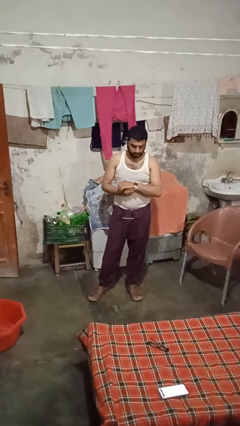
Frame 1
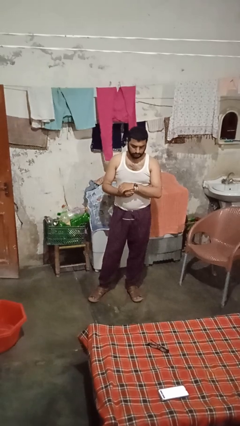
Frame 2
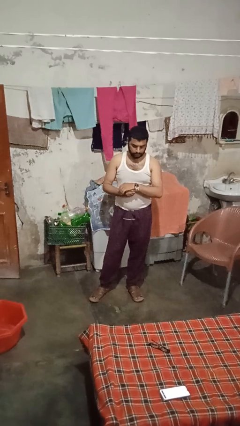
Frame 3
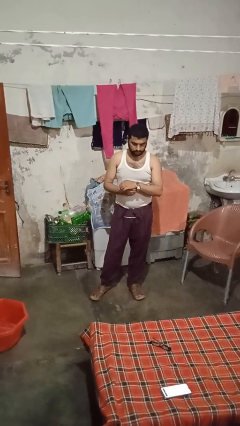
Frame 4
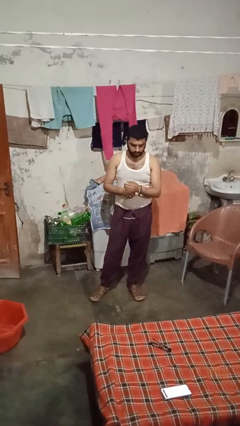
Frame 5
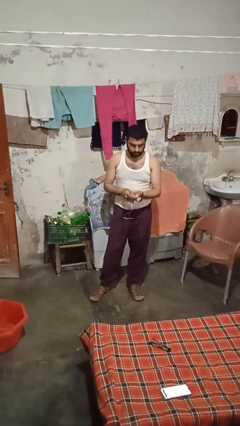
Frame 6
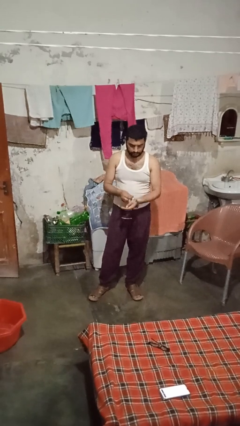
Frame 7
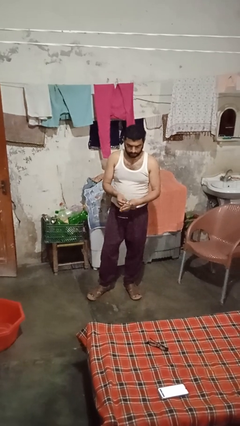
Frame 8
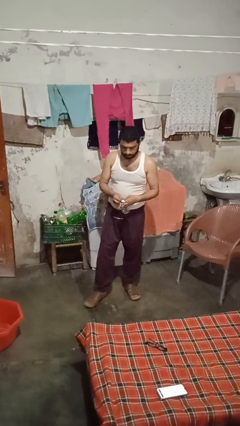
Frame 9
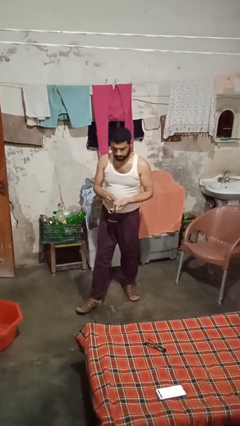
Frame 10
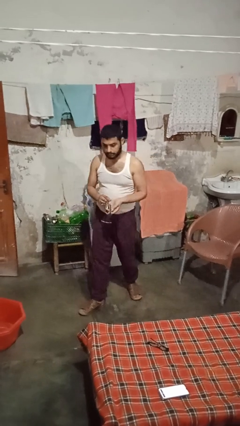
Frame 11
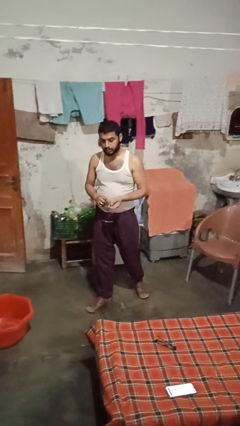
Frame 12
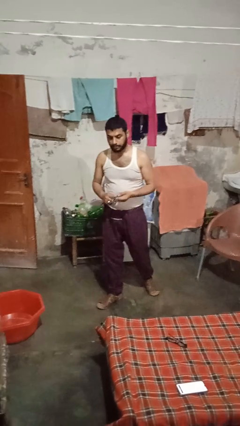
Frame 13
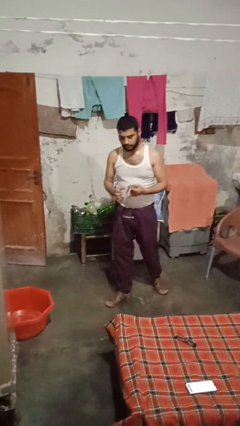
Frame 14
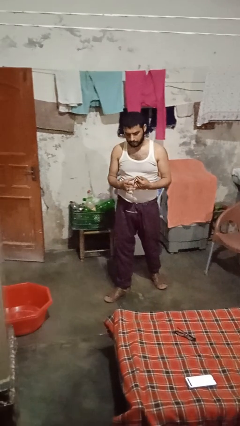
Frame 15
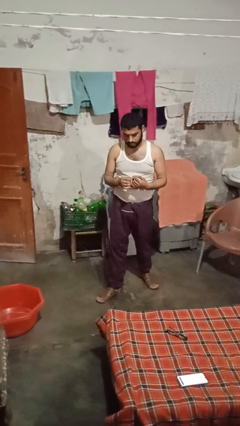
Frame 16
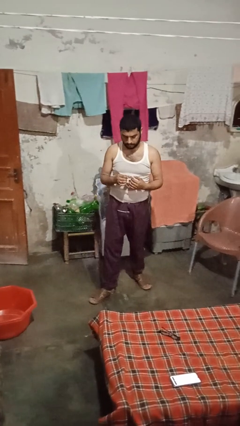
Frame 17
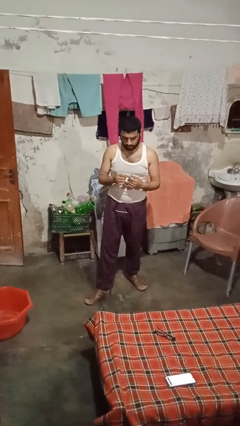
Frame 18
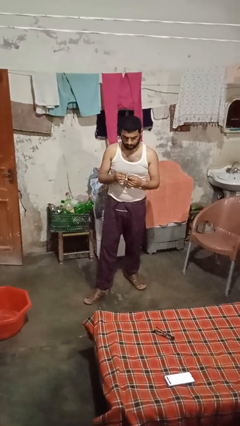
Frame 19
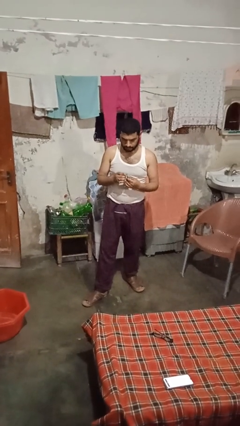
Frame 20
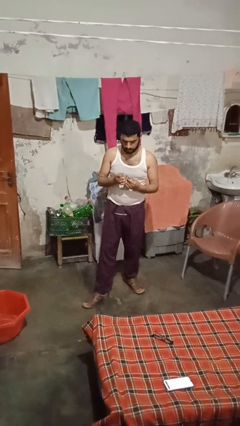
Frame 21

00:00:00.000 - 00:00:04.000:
person takes off wristwatch

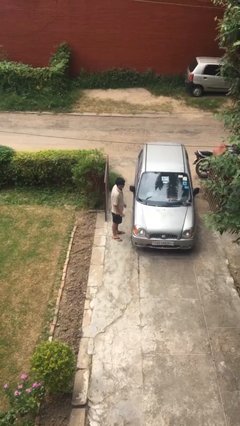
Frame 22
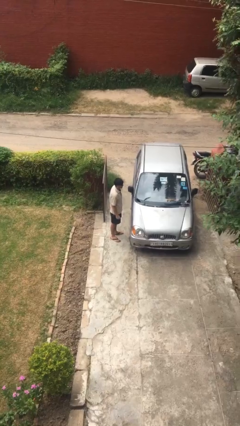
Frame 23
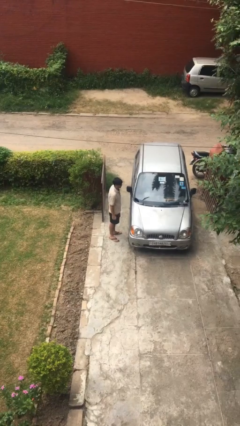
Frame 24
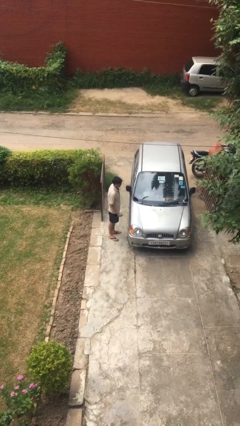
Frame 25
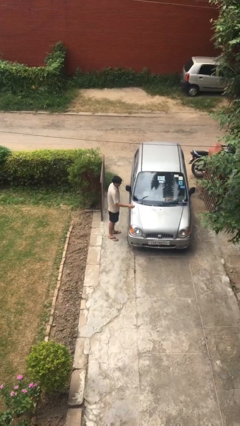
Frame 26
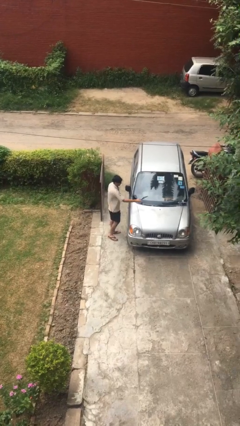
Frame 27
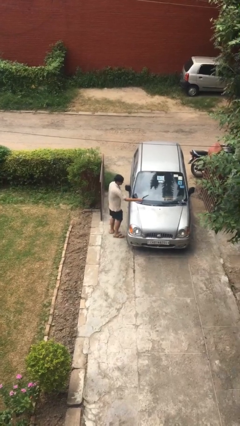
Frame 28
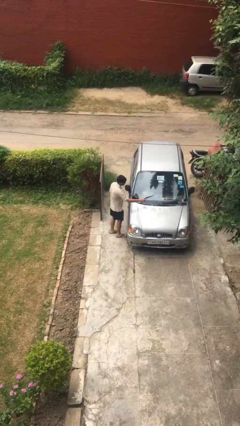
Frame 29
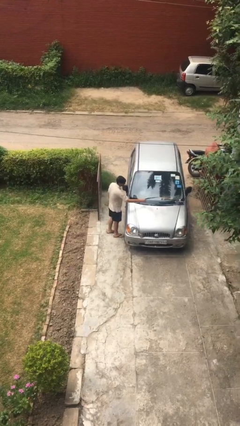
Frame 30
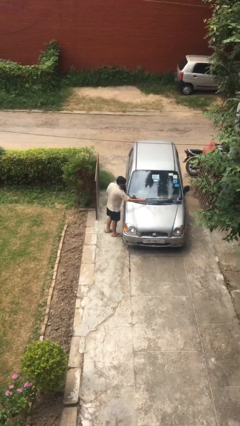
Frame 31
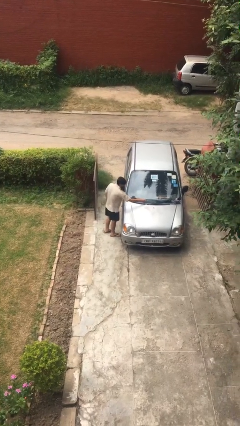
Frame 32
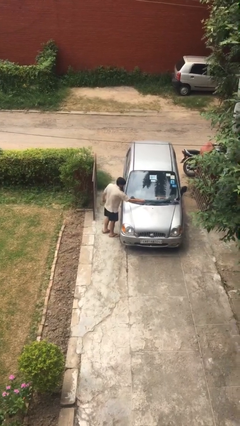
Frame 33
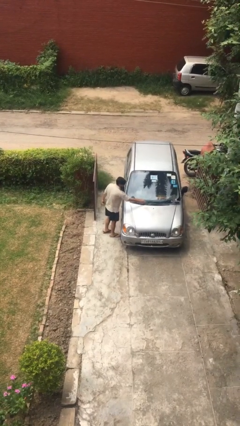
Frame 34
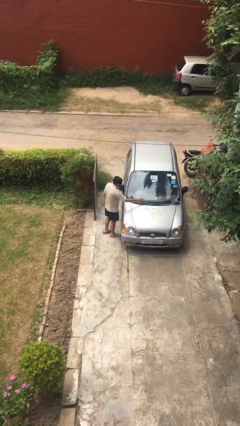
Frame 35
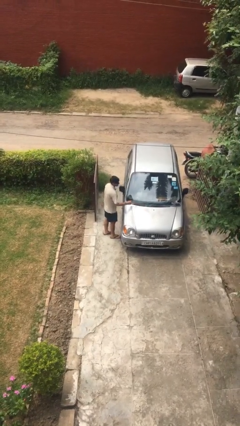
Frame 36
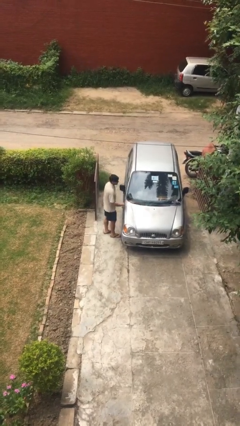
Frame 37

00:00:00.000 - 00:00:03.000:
person flips down car wipers

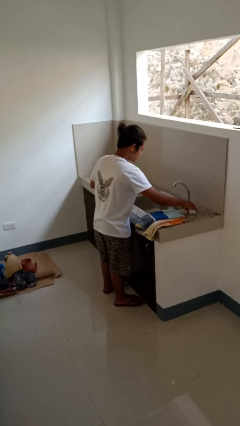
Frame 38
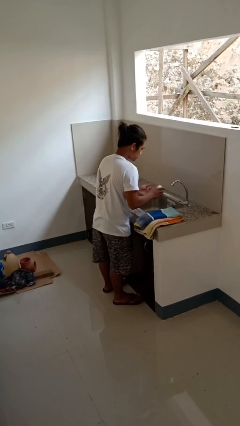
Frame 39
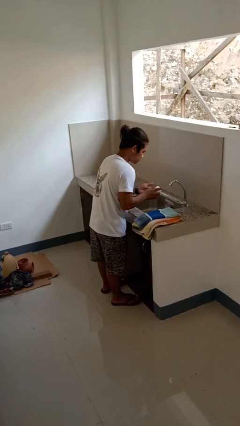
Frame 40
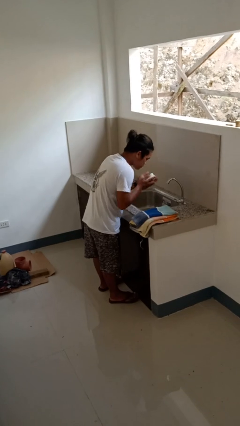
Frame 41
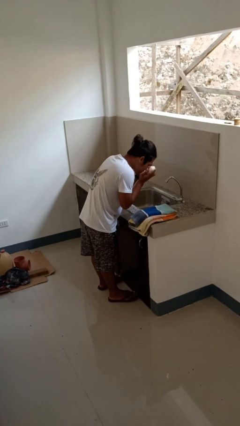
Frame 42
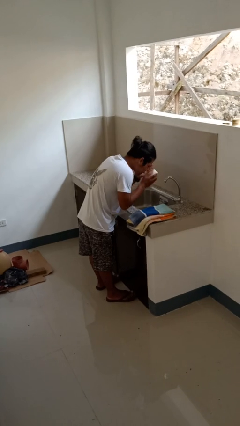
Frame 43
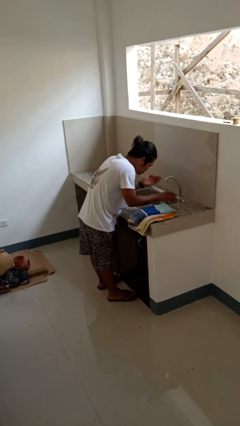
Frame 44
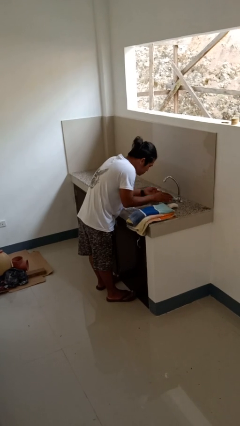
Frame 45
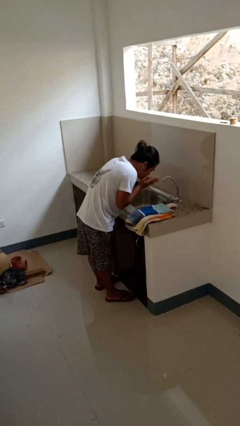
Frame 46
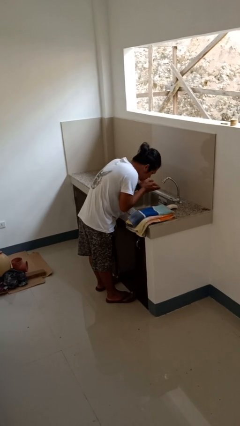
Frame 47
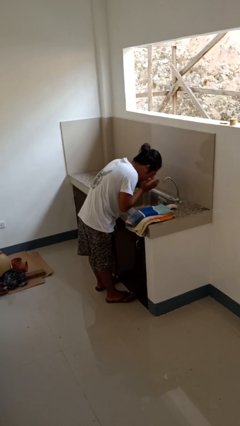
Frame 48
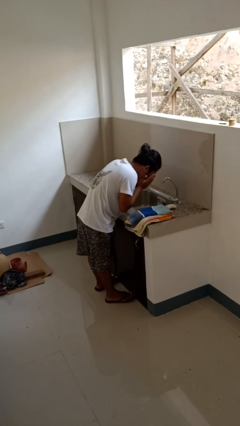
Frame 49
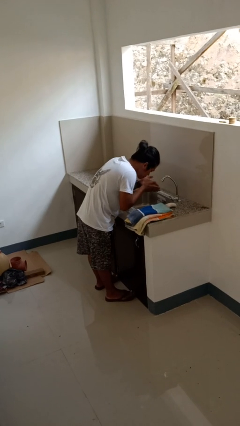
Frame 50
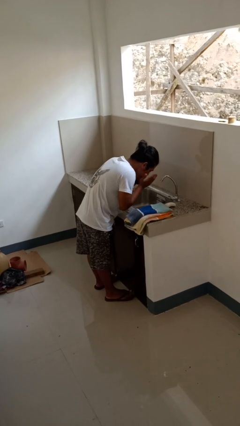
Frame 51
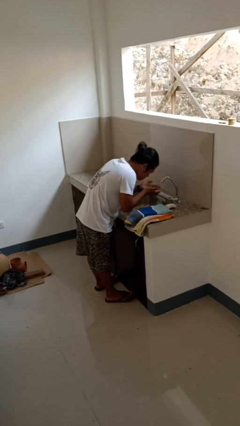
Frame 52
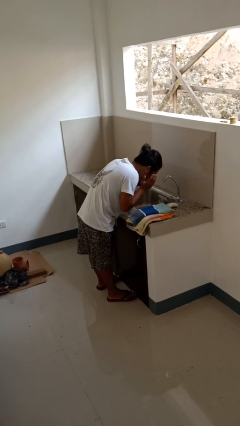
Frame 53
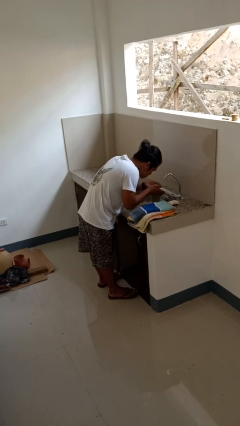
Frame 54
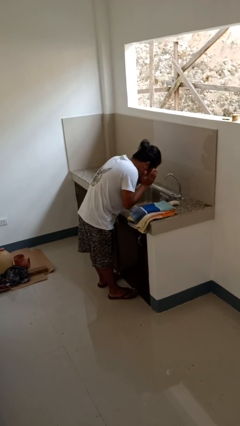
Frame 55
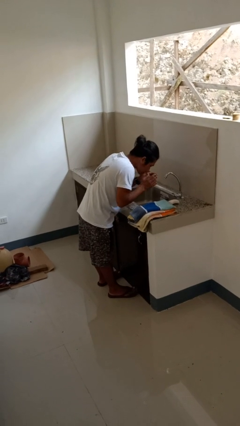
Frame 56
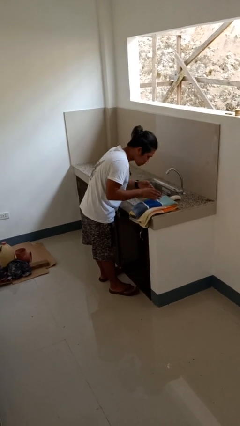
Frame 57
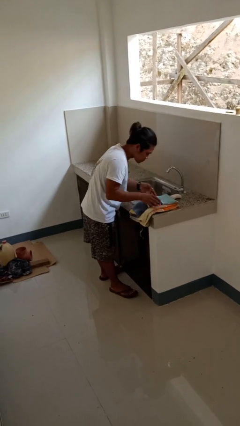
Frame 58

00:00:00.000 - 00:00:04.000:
person washes face

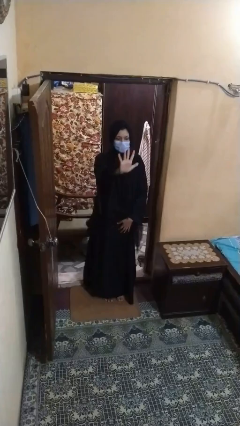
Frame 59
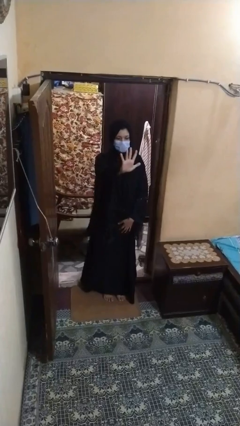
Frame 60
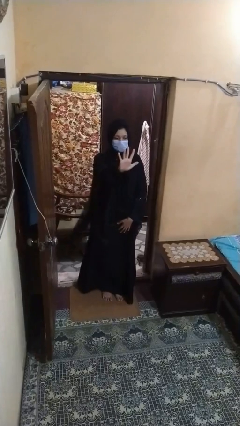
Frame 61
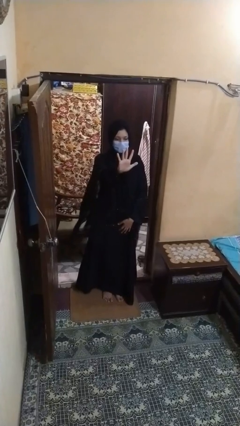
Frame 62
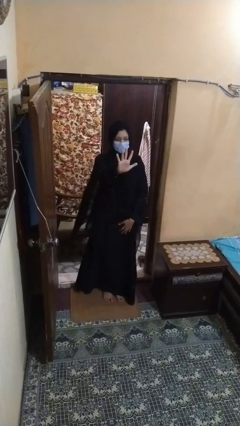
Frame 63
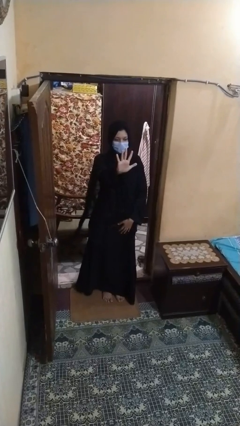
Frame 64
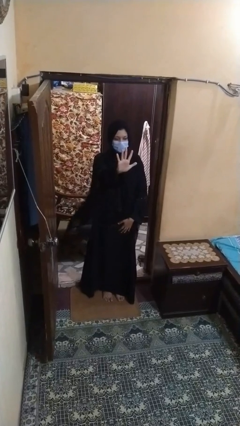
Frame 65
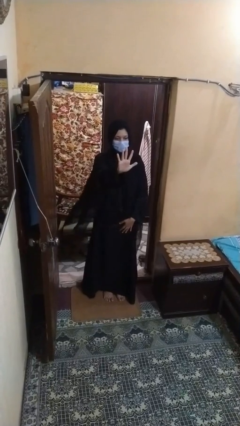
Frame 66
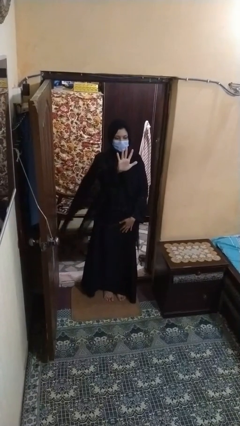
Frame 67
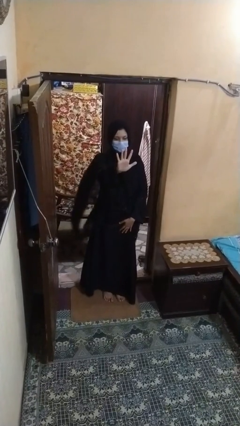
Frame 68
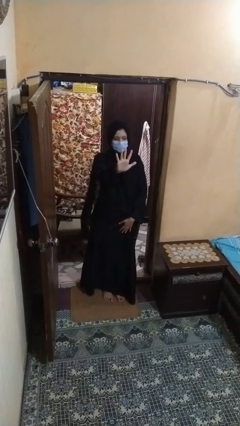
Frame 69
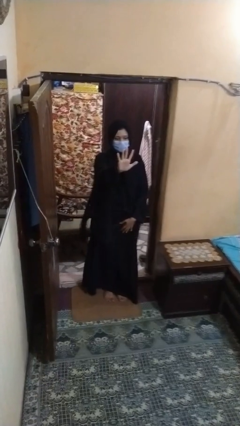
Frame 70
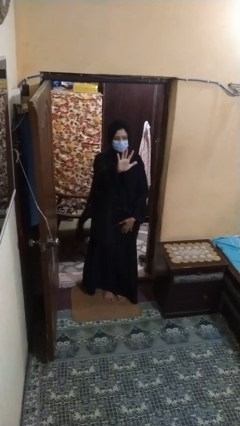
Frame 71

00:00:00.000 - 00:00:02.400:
person gestures number five

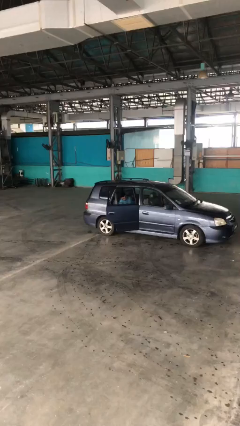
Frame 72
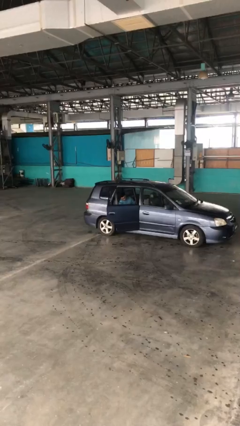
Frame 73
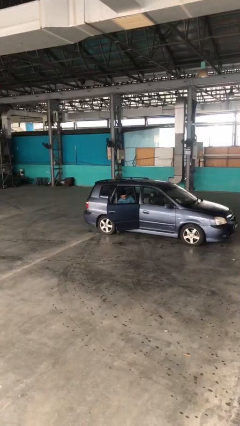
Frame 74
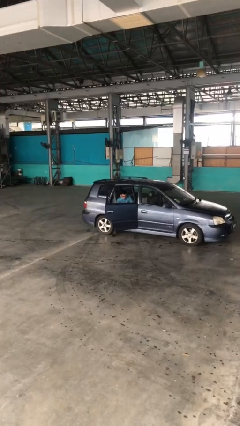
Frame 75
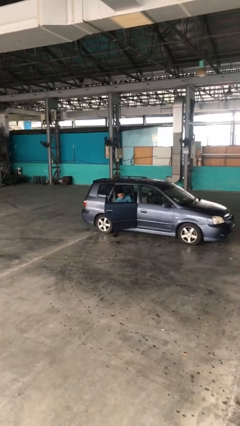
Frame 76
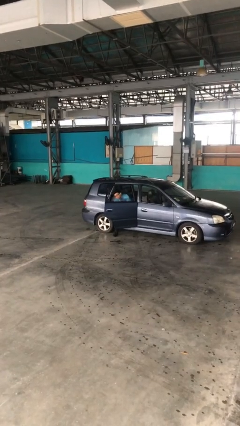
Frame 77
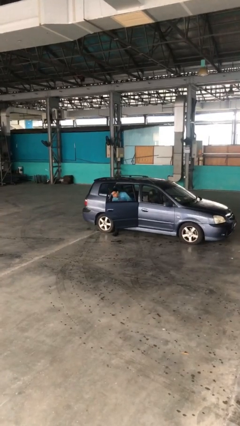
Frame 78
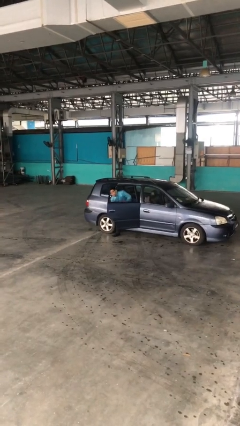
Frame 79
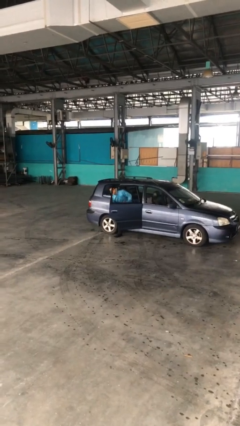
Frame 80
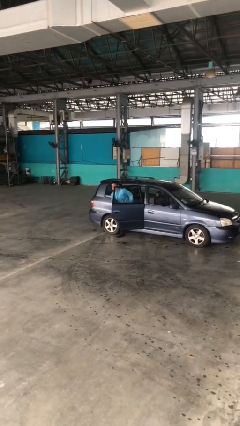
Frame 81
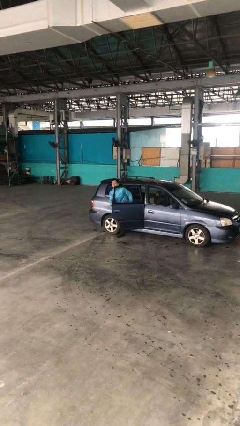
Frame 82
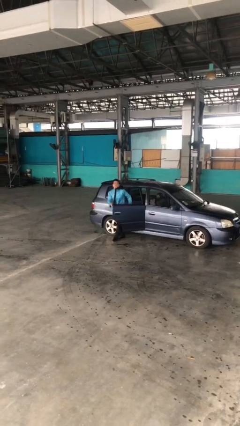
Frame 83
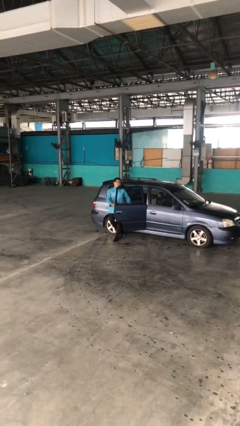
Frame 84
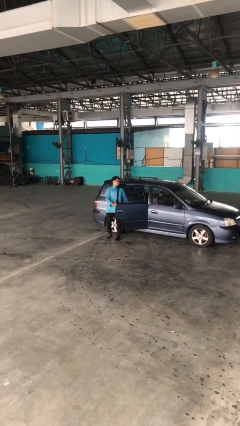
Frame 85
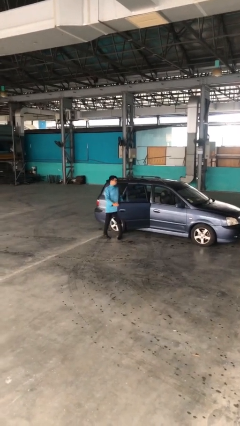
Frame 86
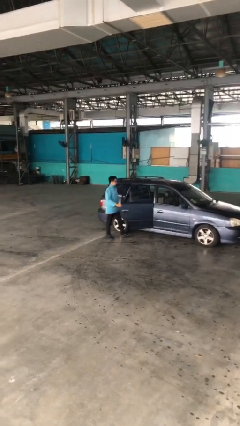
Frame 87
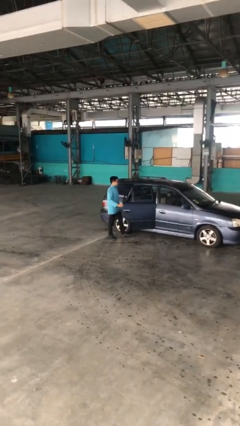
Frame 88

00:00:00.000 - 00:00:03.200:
person exits car

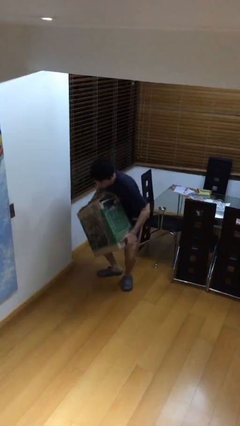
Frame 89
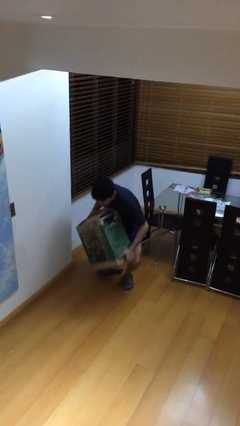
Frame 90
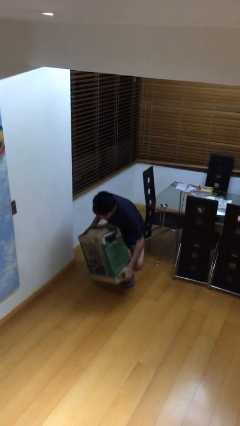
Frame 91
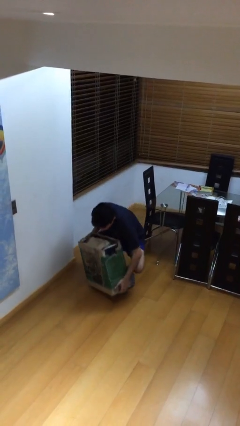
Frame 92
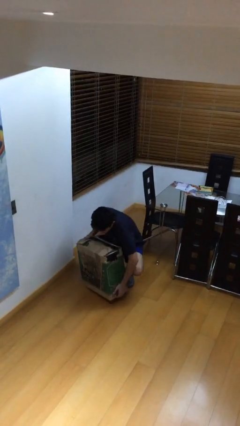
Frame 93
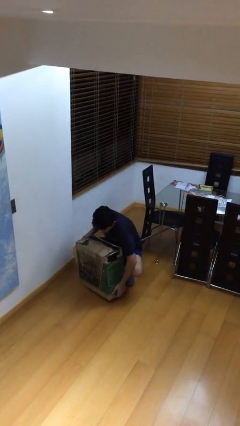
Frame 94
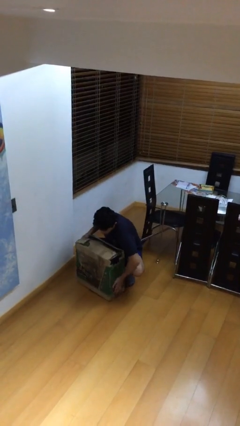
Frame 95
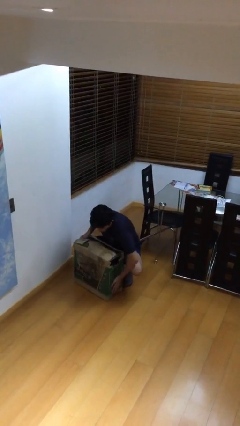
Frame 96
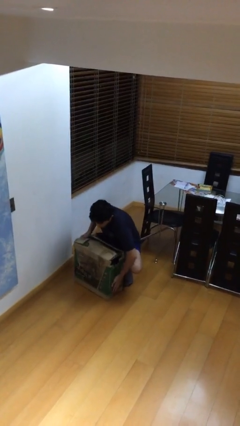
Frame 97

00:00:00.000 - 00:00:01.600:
person puts down object on floor
